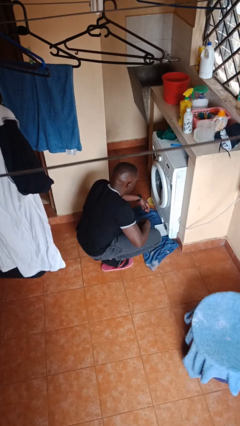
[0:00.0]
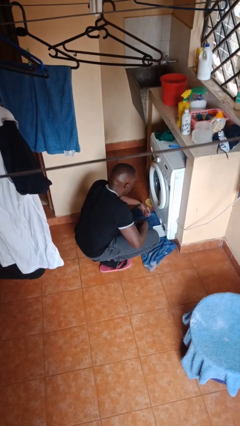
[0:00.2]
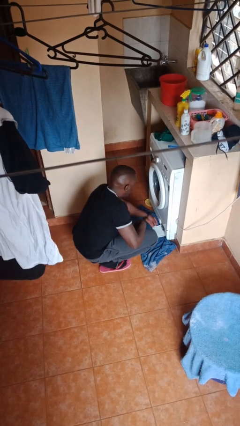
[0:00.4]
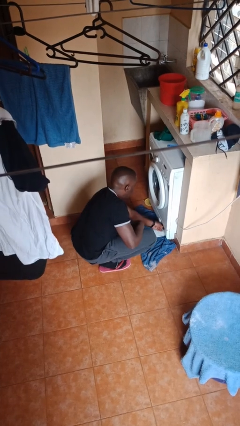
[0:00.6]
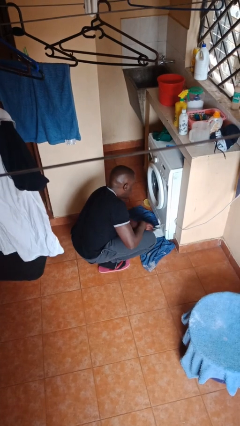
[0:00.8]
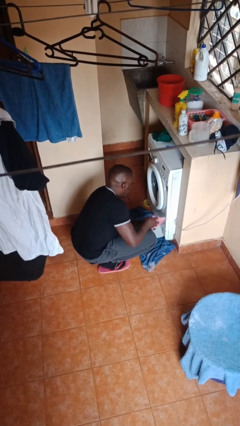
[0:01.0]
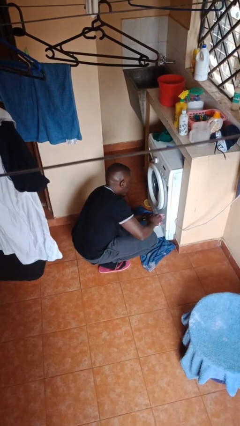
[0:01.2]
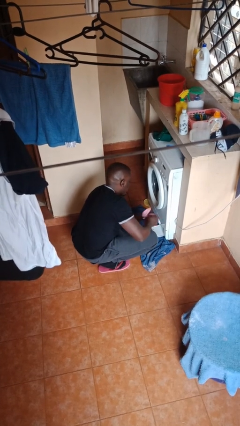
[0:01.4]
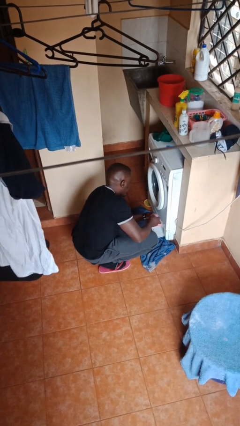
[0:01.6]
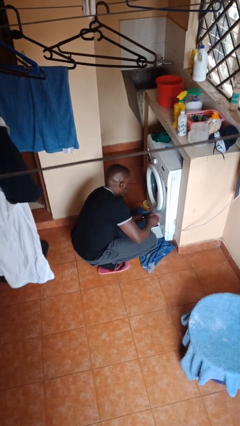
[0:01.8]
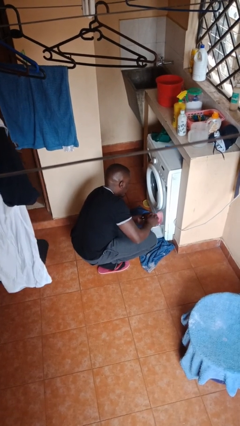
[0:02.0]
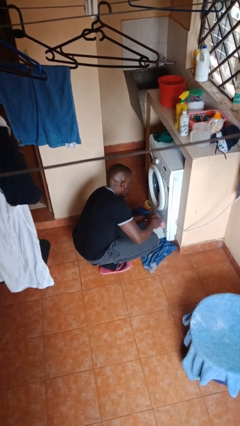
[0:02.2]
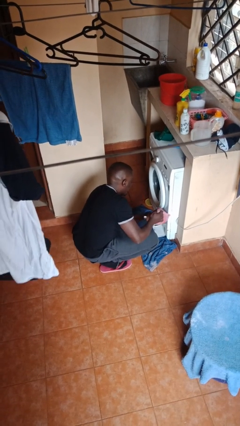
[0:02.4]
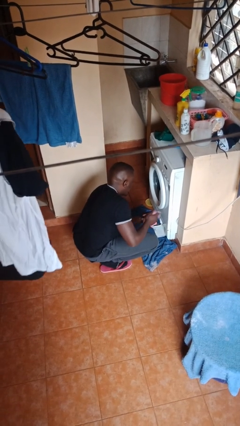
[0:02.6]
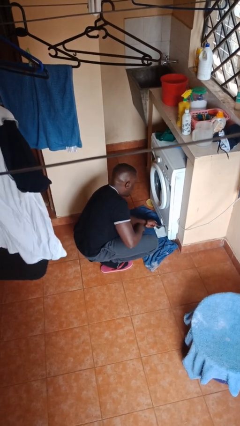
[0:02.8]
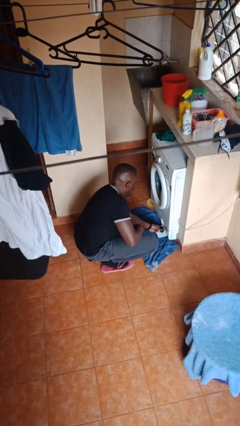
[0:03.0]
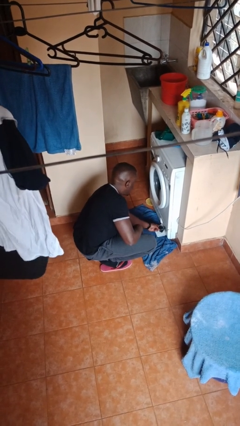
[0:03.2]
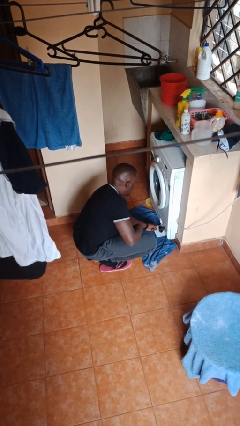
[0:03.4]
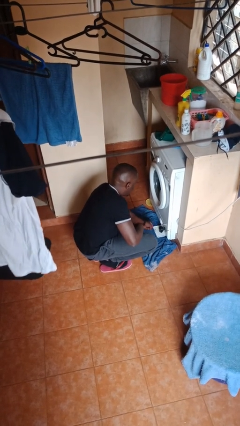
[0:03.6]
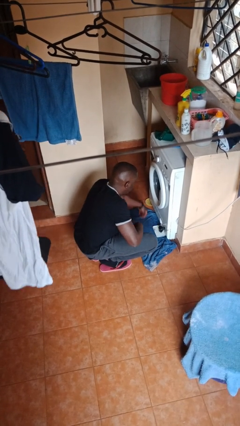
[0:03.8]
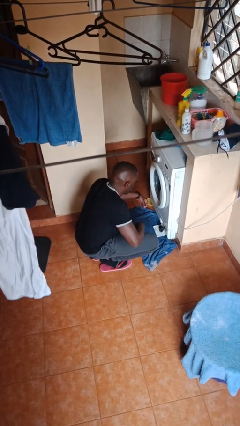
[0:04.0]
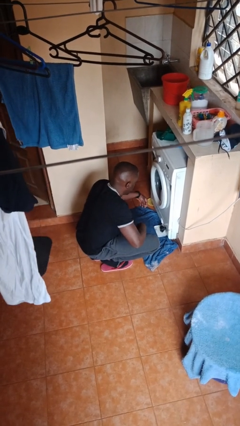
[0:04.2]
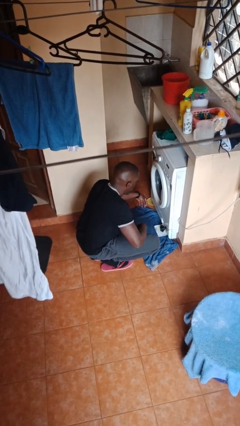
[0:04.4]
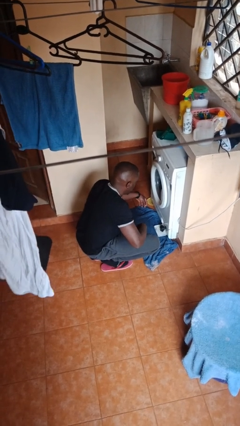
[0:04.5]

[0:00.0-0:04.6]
person cleans dryer lint trap

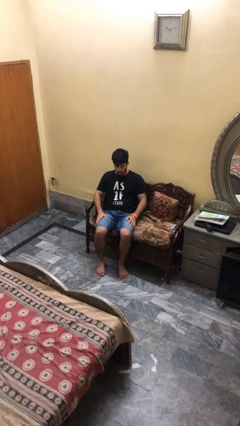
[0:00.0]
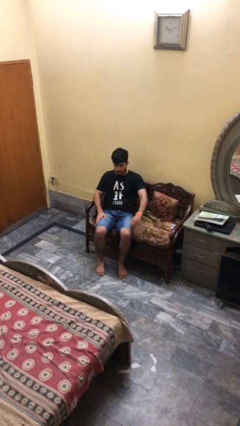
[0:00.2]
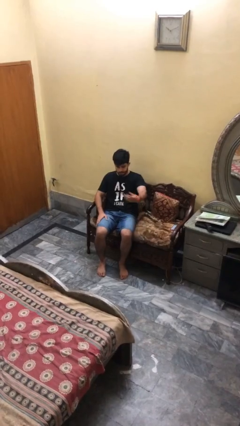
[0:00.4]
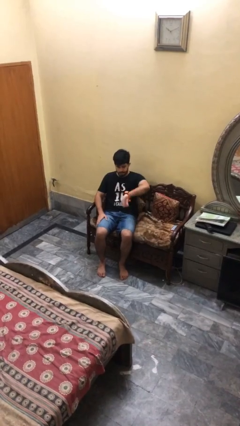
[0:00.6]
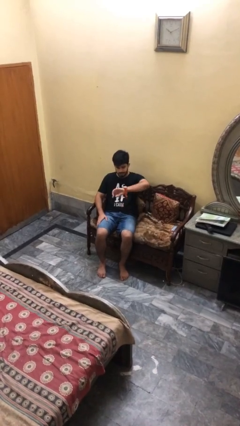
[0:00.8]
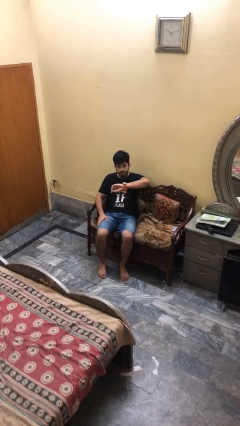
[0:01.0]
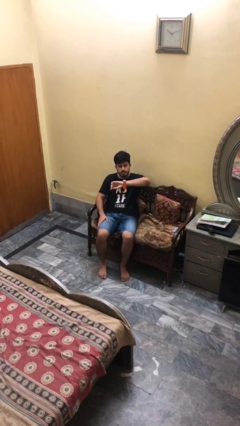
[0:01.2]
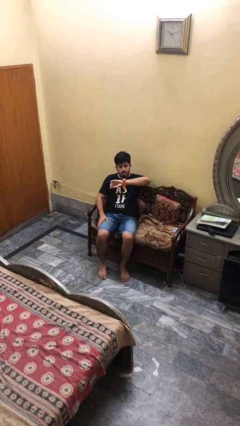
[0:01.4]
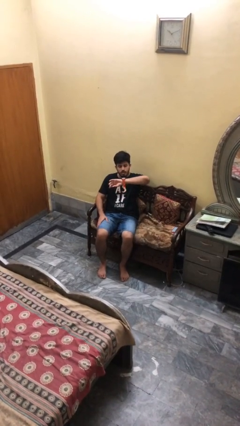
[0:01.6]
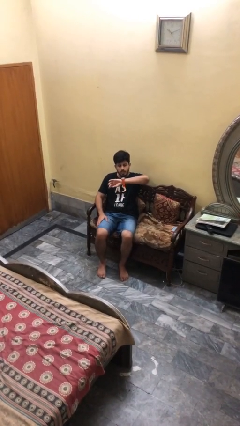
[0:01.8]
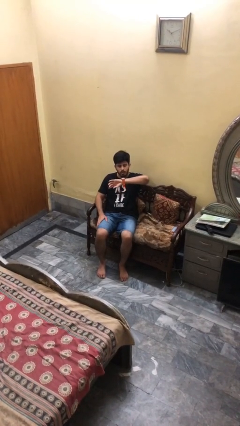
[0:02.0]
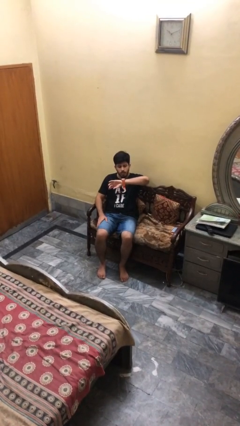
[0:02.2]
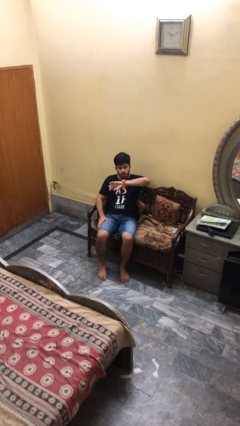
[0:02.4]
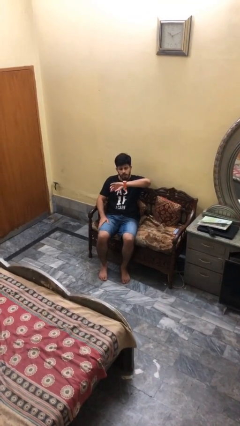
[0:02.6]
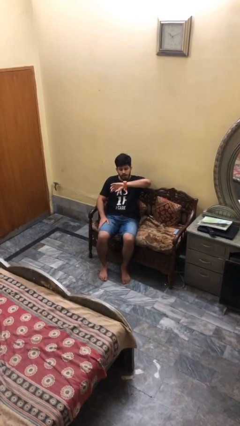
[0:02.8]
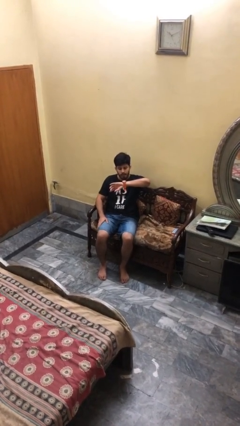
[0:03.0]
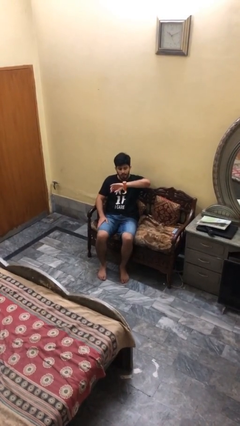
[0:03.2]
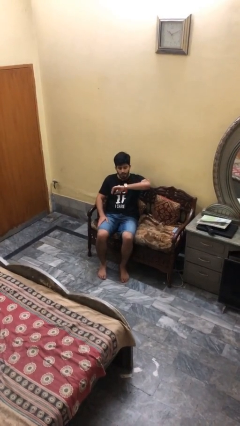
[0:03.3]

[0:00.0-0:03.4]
person looks at wristwatch

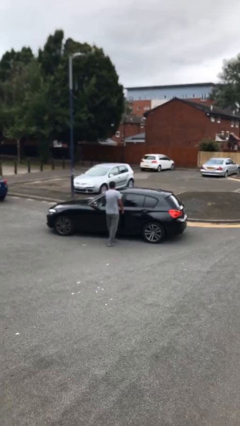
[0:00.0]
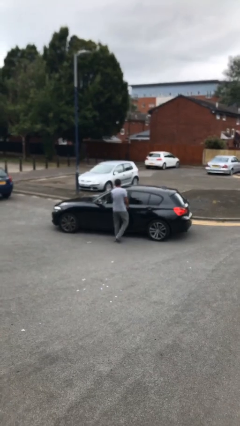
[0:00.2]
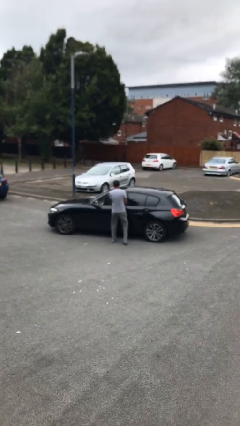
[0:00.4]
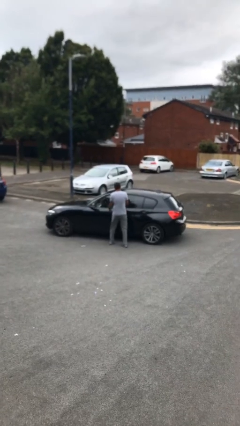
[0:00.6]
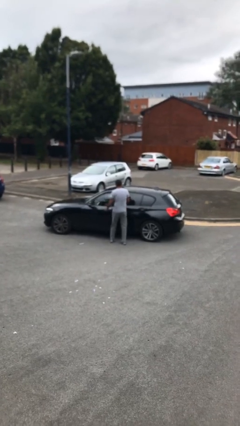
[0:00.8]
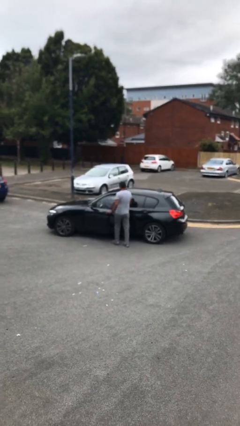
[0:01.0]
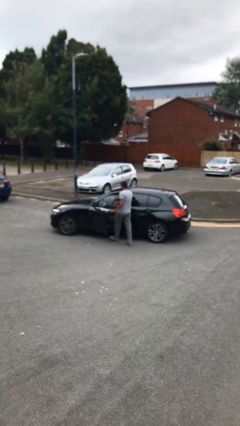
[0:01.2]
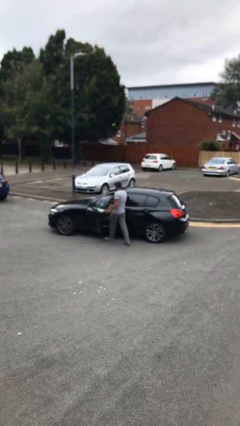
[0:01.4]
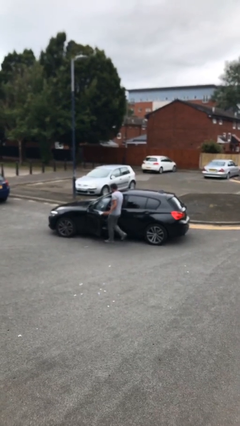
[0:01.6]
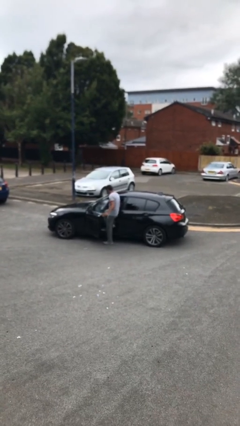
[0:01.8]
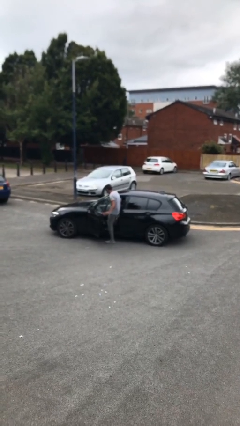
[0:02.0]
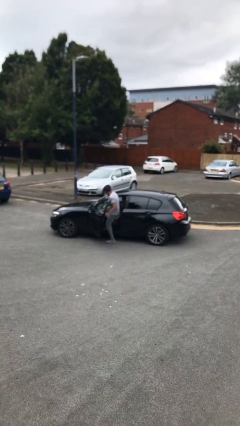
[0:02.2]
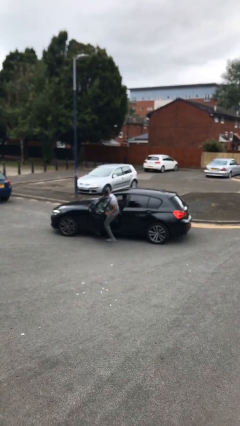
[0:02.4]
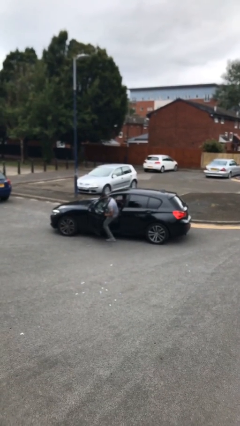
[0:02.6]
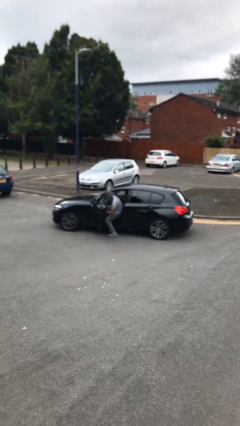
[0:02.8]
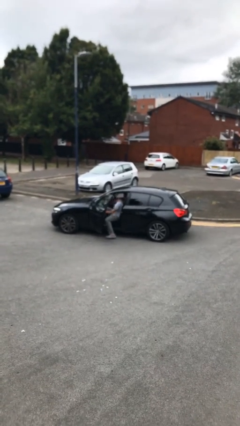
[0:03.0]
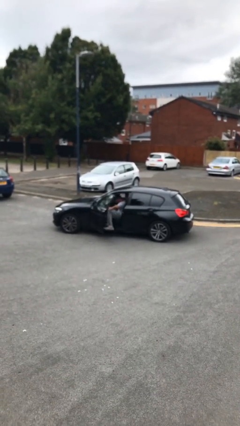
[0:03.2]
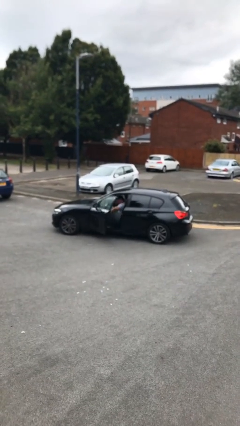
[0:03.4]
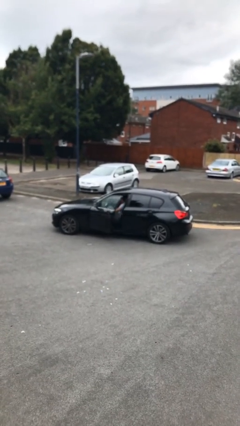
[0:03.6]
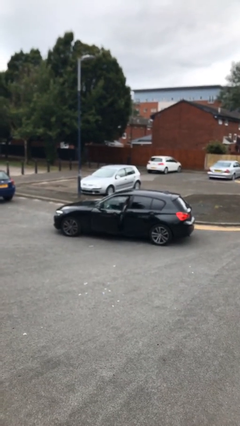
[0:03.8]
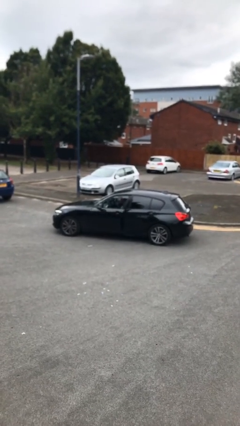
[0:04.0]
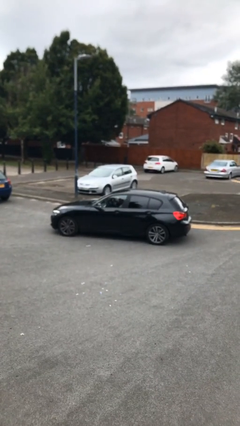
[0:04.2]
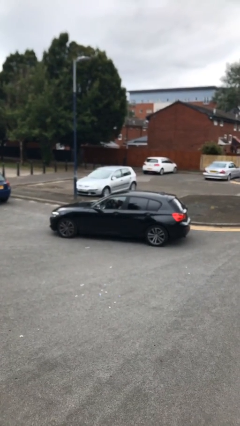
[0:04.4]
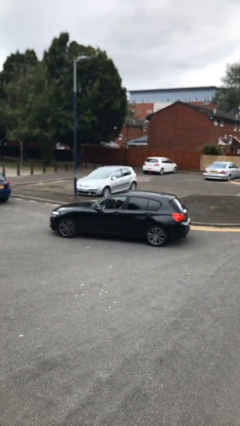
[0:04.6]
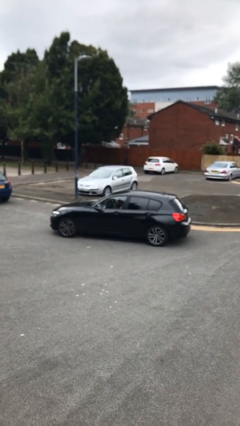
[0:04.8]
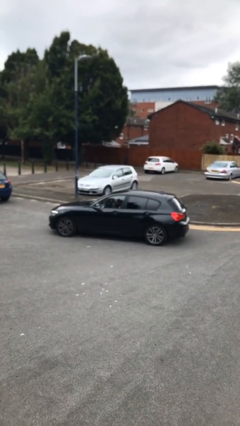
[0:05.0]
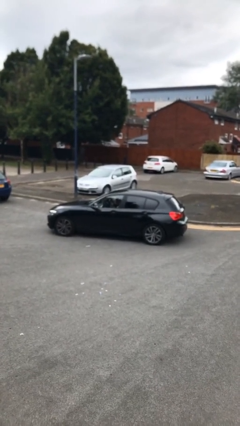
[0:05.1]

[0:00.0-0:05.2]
car picks up person

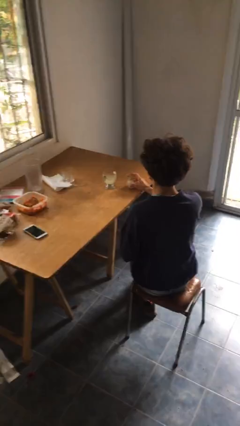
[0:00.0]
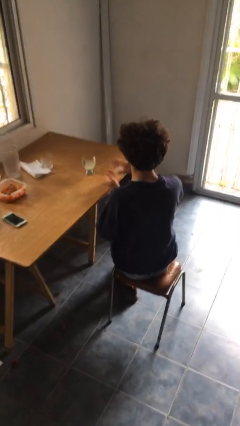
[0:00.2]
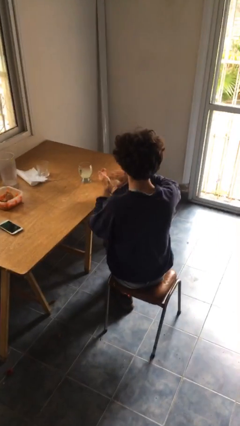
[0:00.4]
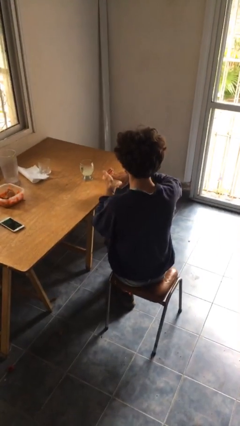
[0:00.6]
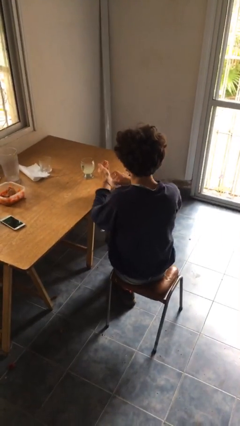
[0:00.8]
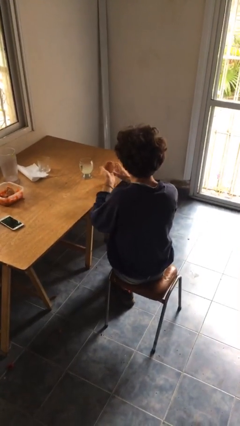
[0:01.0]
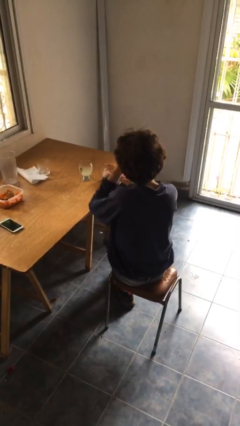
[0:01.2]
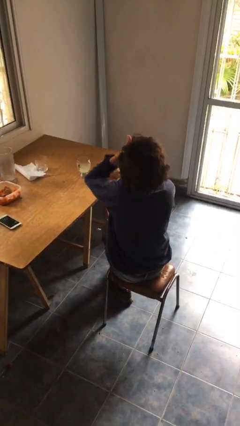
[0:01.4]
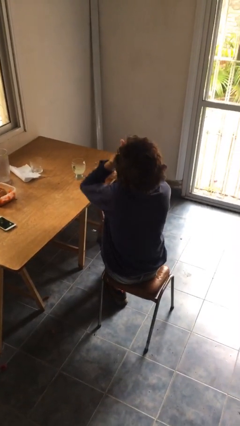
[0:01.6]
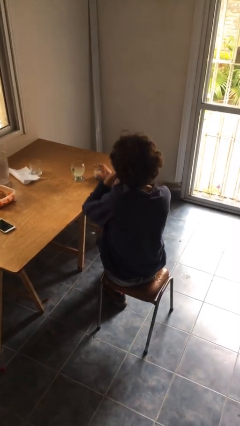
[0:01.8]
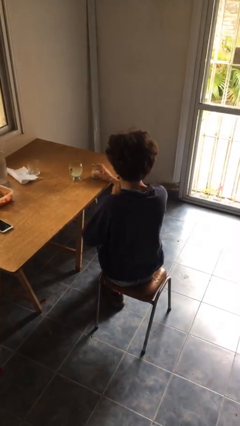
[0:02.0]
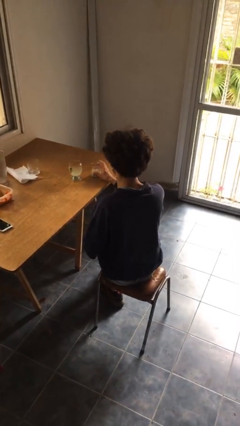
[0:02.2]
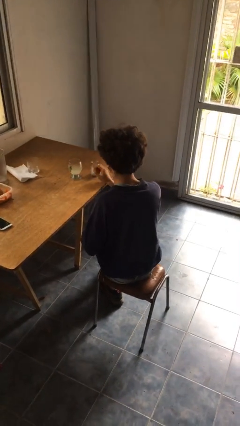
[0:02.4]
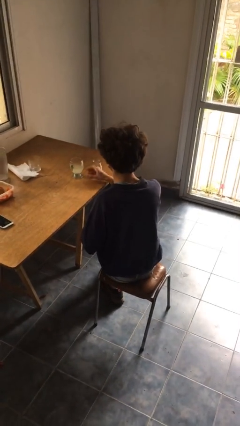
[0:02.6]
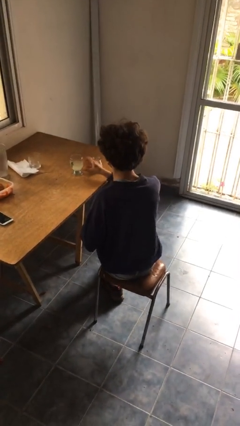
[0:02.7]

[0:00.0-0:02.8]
person takes medicine pills

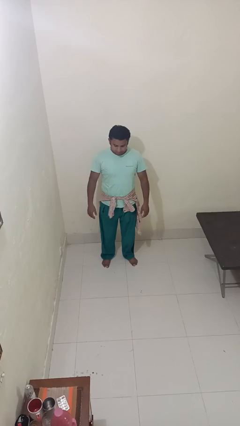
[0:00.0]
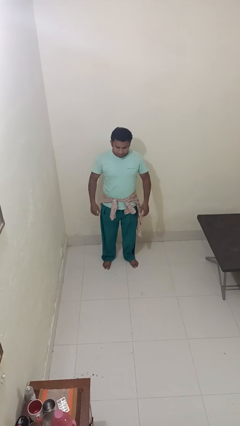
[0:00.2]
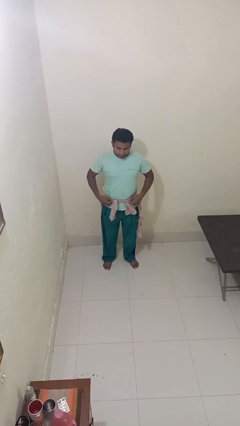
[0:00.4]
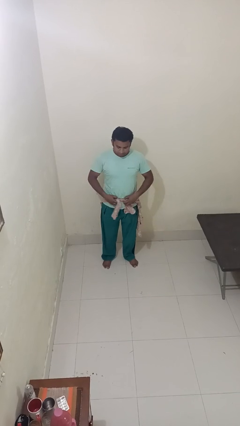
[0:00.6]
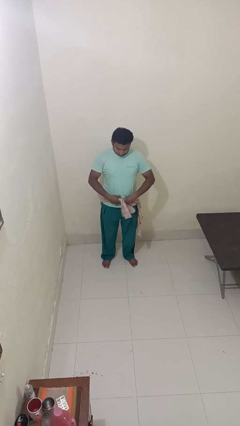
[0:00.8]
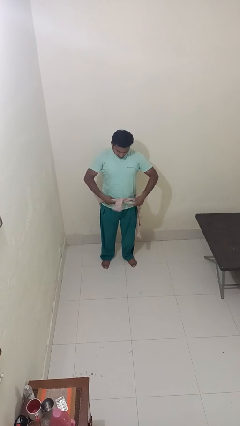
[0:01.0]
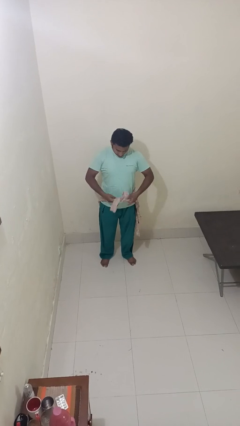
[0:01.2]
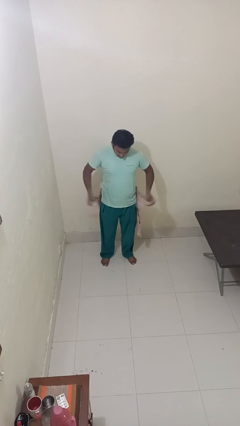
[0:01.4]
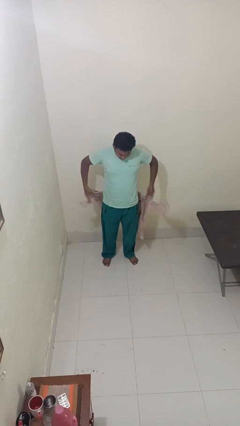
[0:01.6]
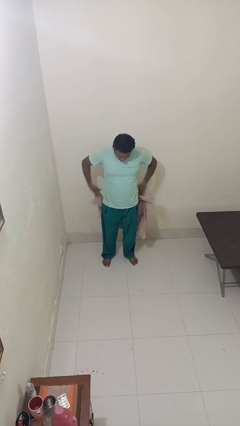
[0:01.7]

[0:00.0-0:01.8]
person unties jacket around waist
